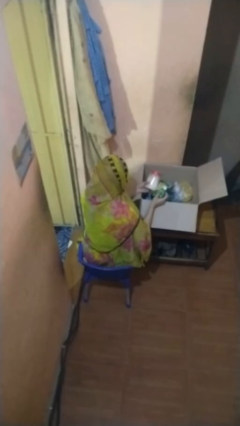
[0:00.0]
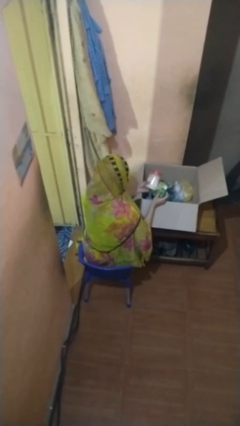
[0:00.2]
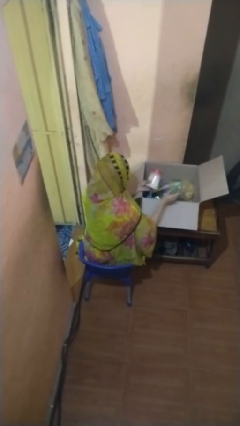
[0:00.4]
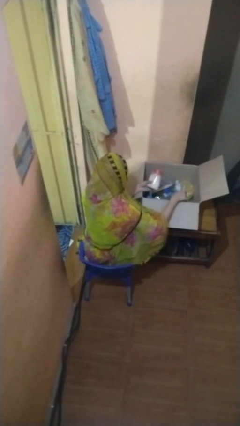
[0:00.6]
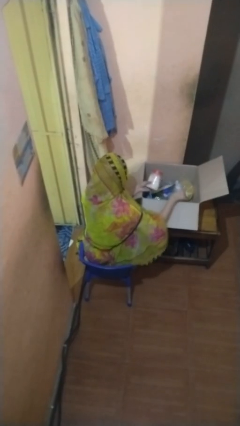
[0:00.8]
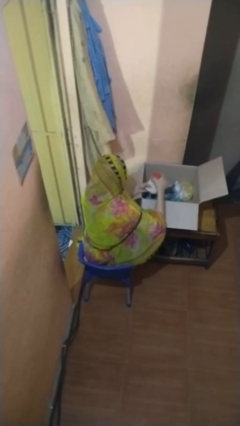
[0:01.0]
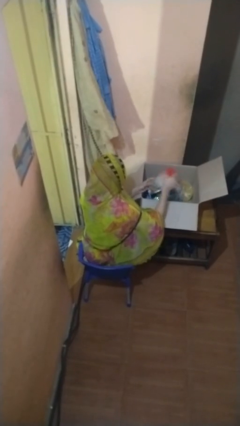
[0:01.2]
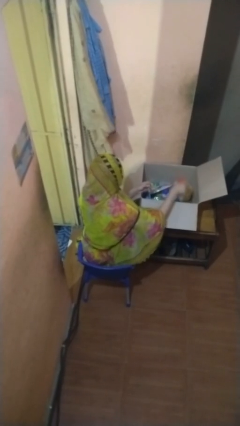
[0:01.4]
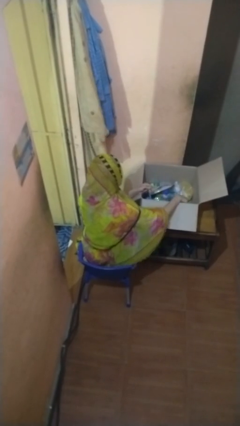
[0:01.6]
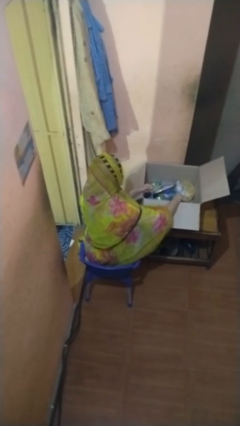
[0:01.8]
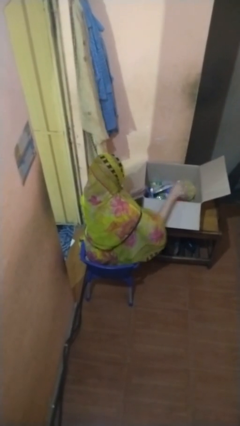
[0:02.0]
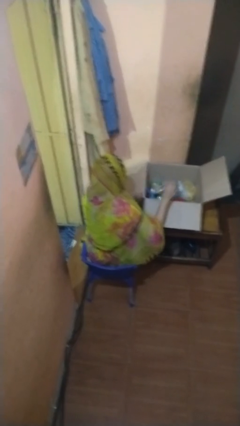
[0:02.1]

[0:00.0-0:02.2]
person puts object into box

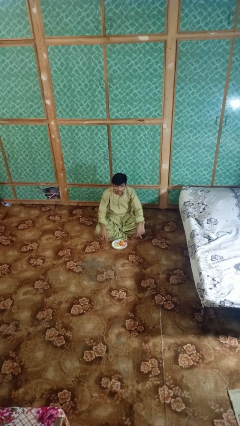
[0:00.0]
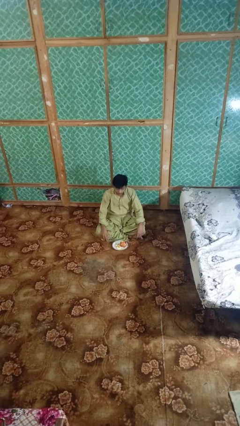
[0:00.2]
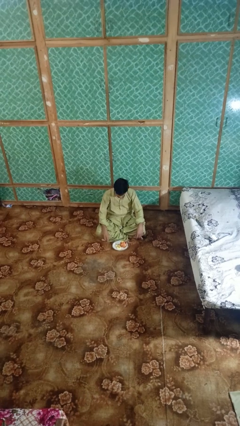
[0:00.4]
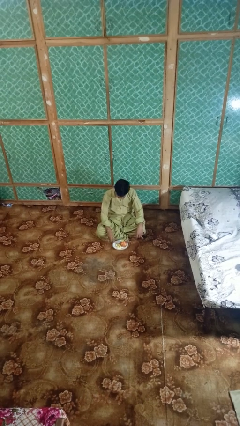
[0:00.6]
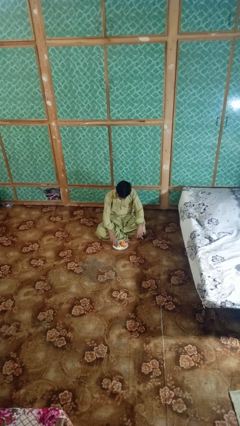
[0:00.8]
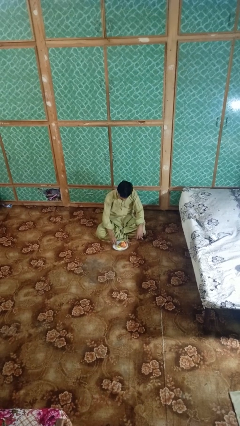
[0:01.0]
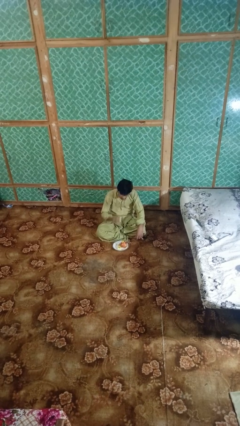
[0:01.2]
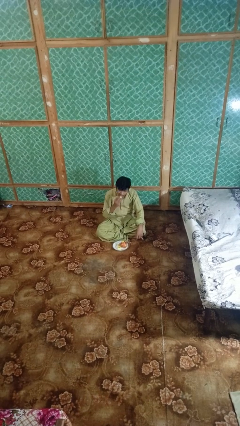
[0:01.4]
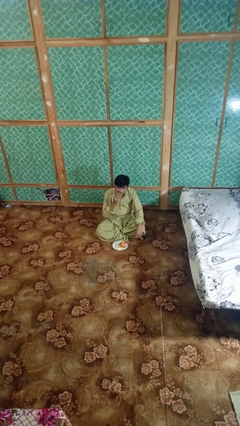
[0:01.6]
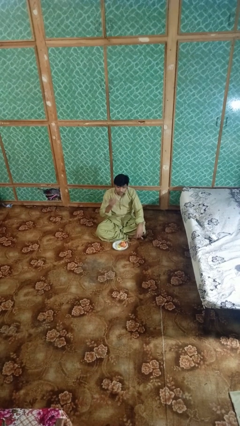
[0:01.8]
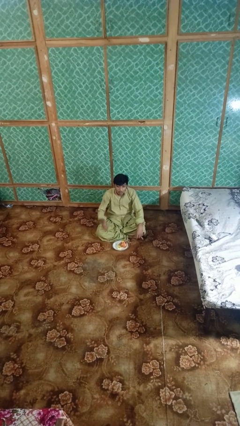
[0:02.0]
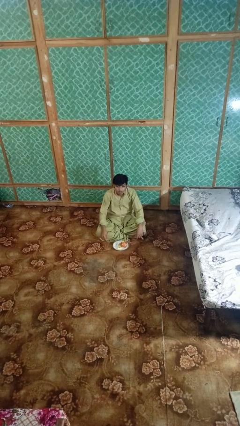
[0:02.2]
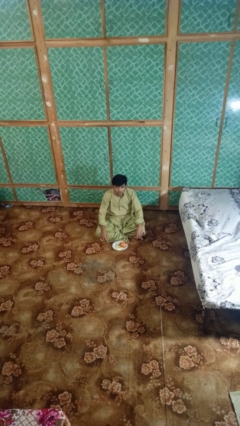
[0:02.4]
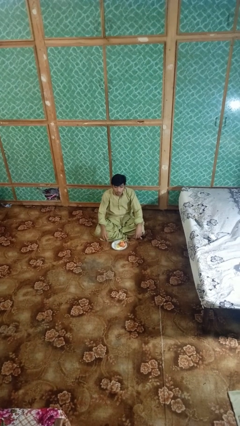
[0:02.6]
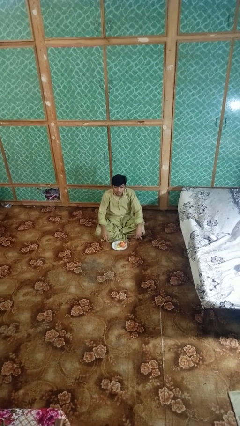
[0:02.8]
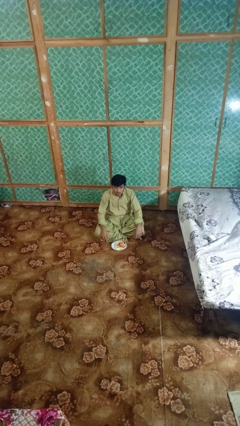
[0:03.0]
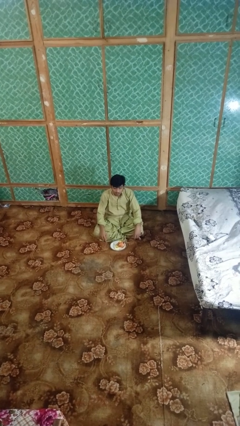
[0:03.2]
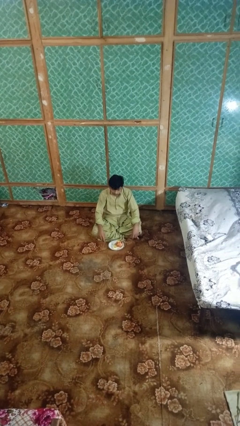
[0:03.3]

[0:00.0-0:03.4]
person eats apple

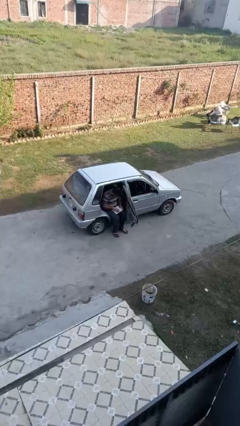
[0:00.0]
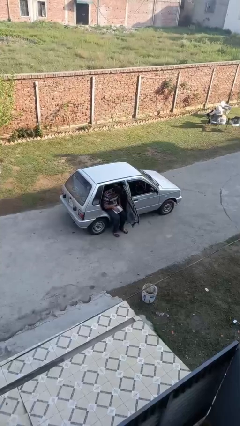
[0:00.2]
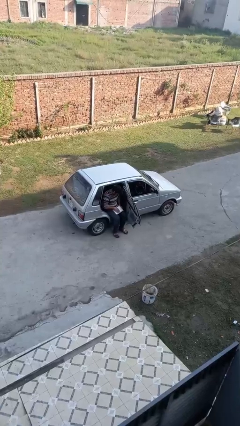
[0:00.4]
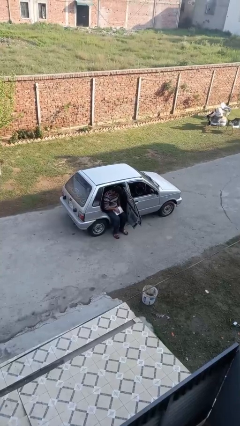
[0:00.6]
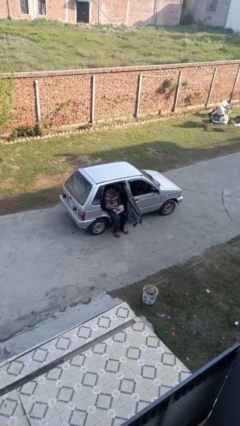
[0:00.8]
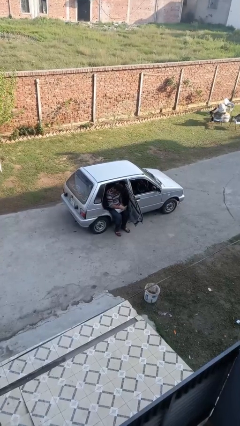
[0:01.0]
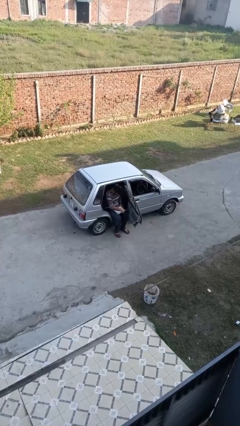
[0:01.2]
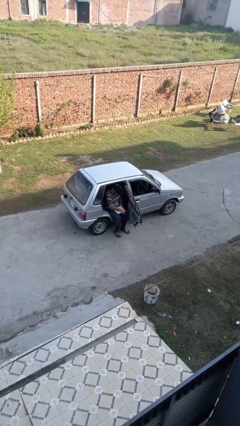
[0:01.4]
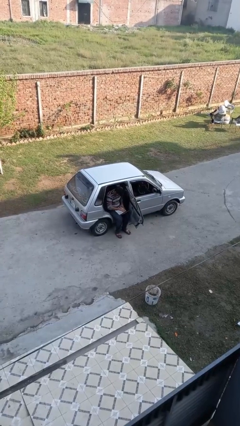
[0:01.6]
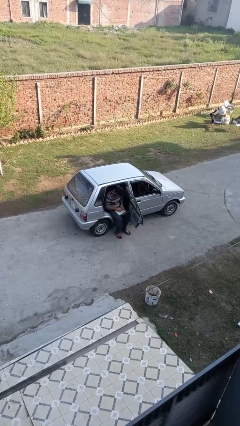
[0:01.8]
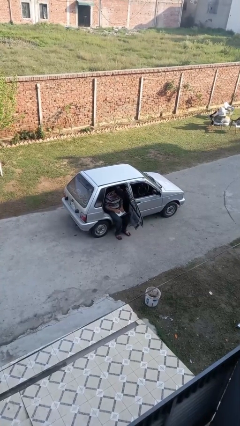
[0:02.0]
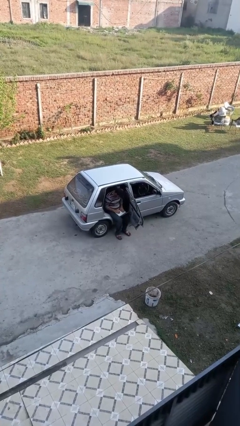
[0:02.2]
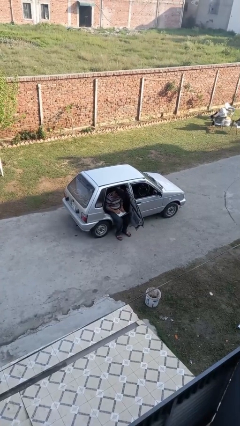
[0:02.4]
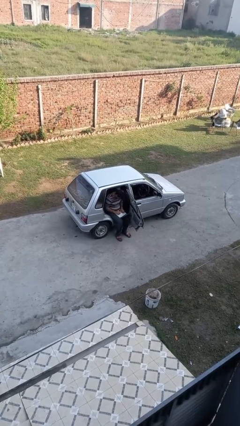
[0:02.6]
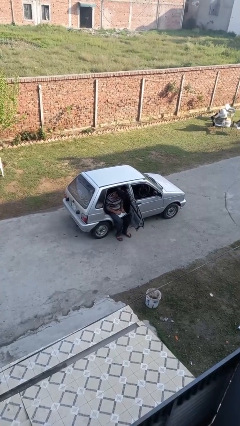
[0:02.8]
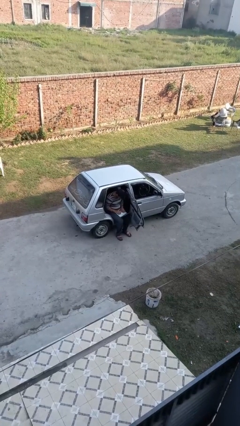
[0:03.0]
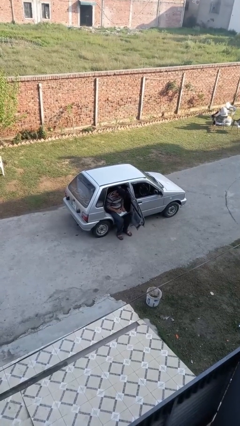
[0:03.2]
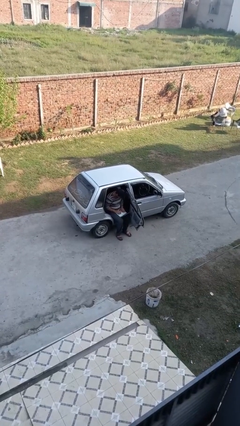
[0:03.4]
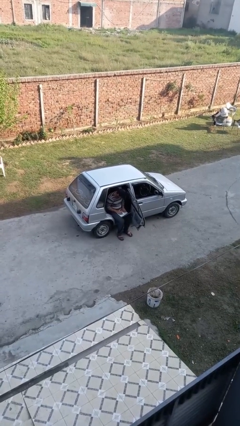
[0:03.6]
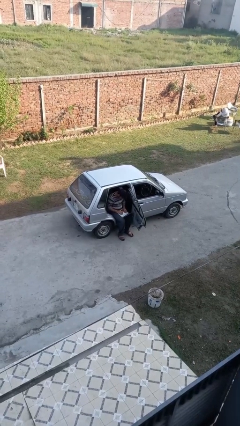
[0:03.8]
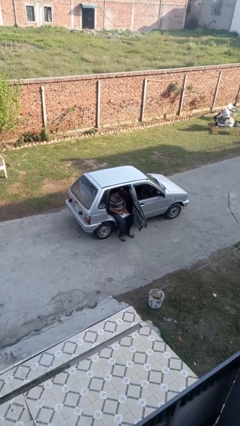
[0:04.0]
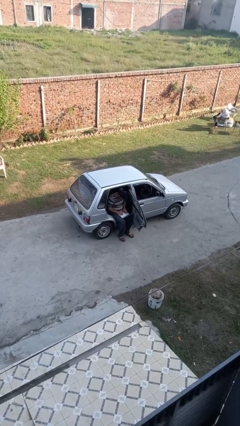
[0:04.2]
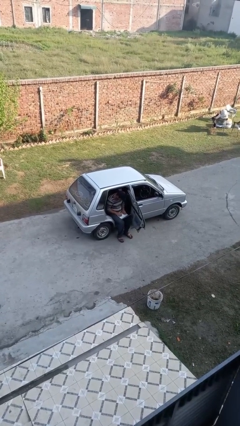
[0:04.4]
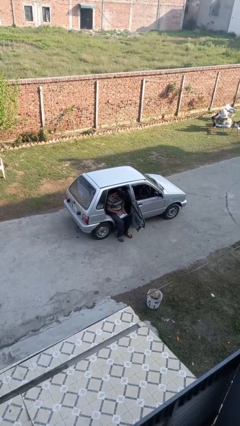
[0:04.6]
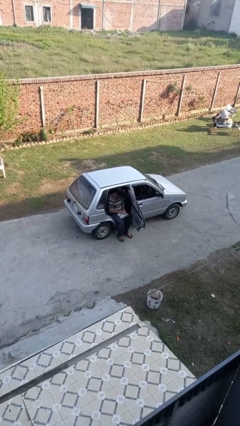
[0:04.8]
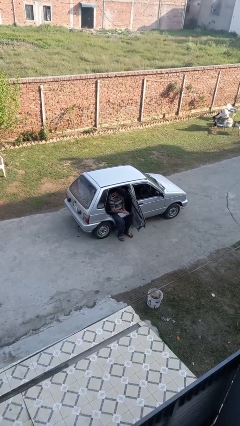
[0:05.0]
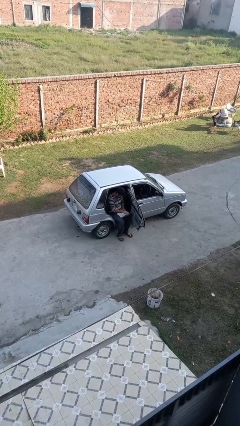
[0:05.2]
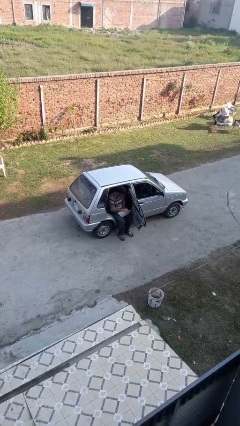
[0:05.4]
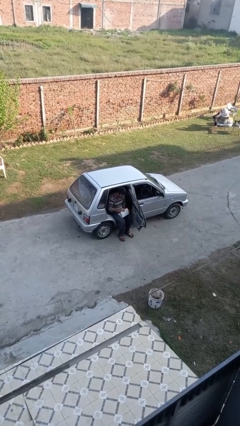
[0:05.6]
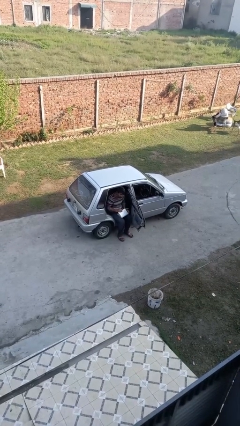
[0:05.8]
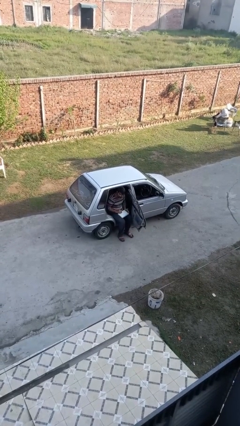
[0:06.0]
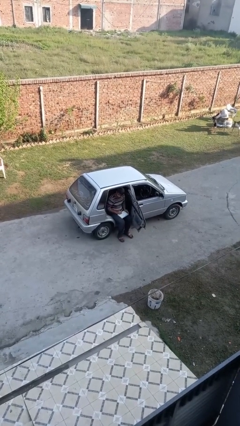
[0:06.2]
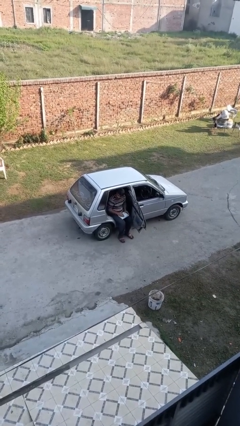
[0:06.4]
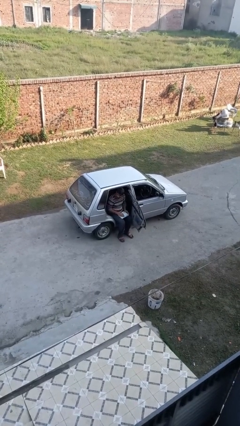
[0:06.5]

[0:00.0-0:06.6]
person interacts with laptop

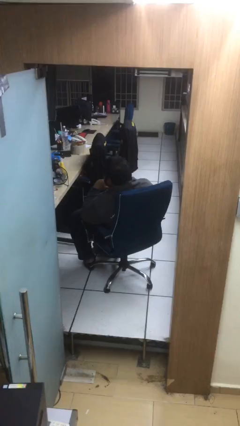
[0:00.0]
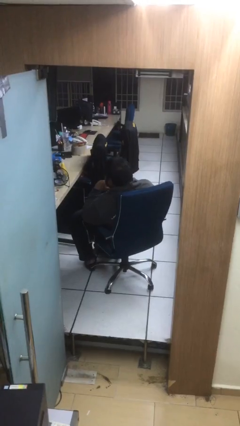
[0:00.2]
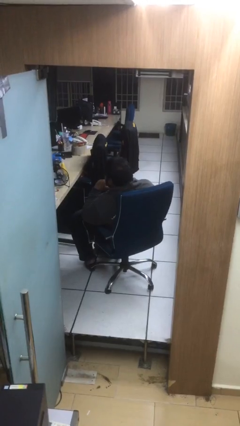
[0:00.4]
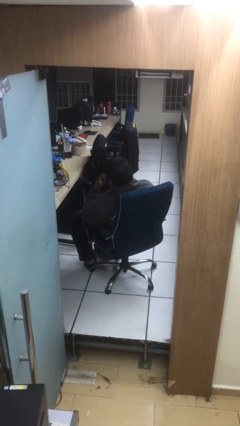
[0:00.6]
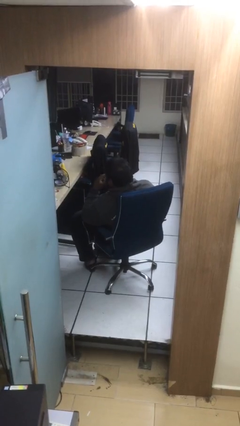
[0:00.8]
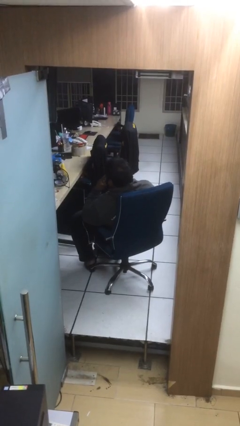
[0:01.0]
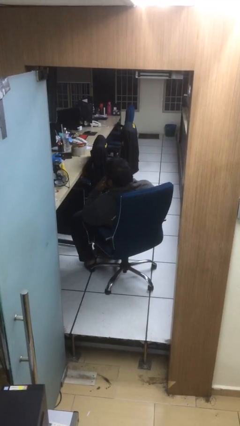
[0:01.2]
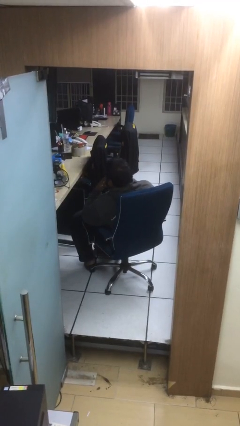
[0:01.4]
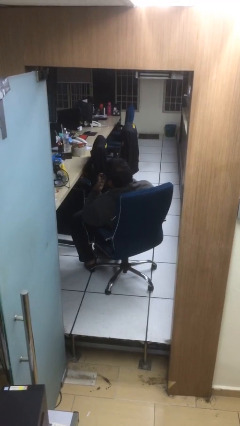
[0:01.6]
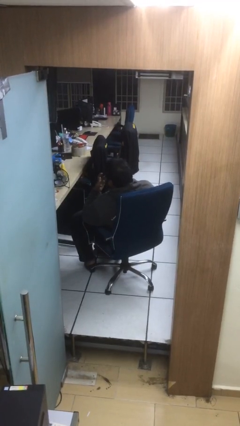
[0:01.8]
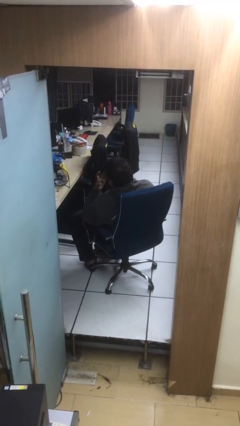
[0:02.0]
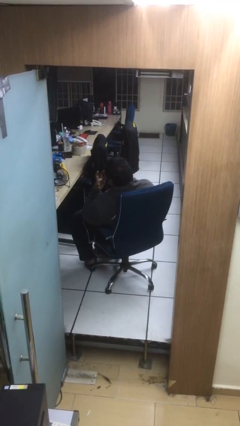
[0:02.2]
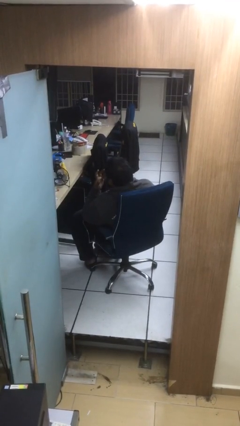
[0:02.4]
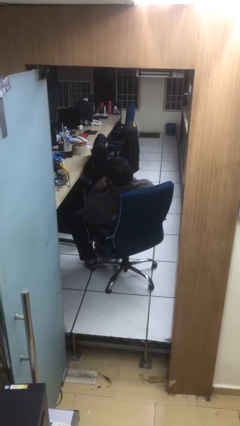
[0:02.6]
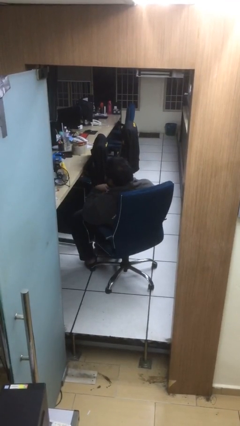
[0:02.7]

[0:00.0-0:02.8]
person licks fingers

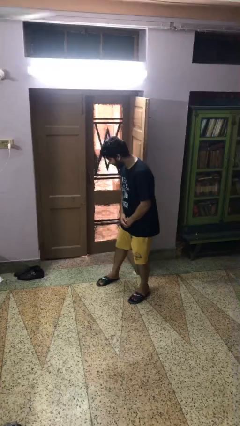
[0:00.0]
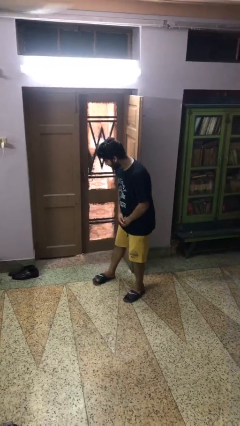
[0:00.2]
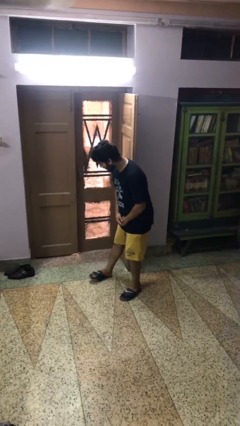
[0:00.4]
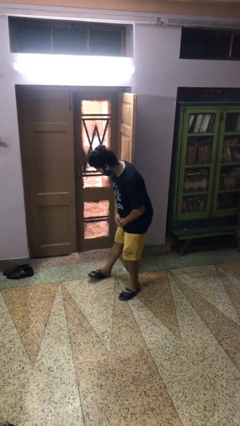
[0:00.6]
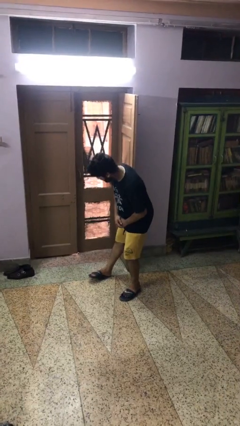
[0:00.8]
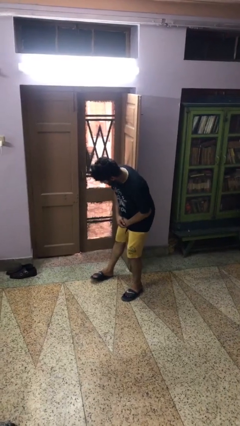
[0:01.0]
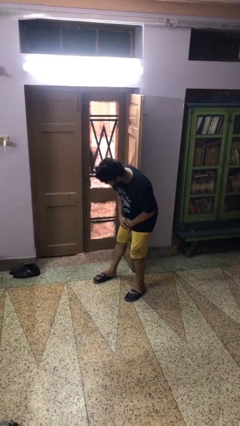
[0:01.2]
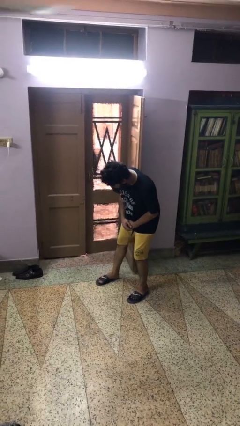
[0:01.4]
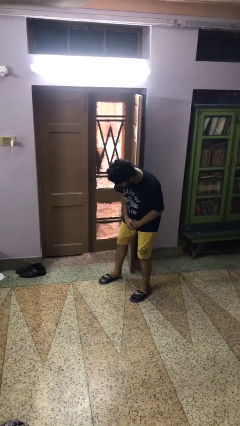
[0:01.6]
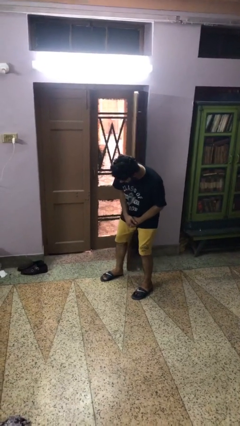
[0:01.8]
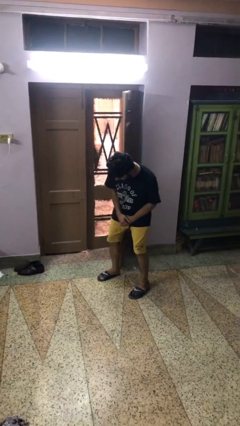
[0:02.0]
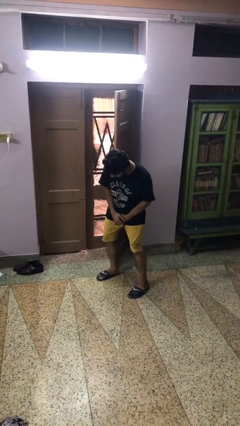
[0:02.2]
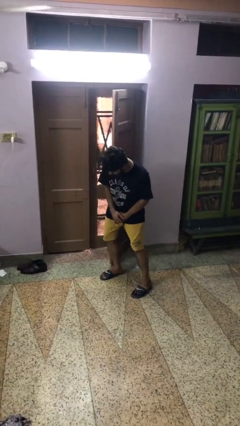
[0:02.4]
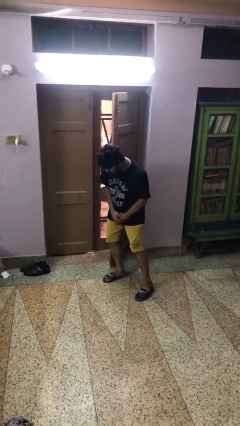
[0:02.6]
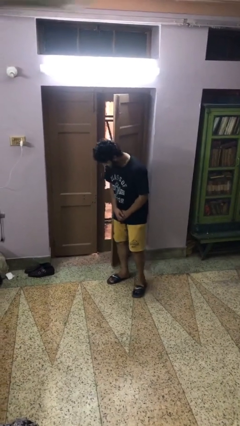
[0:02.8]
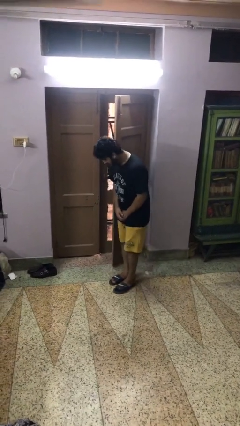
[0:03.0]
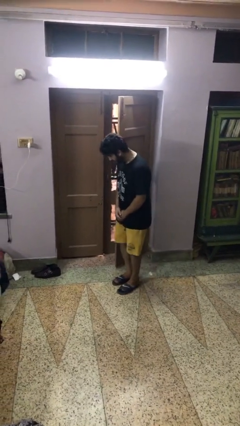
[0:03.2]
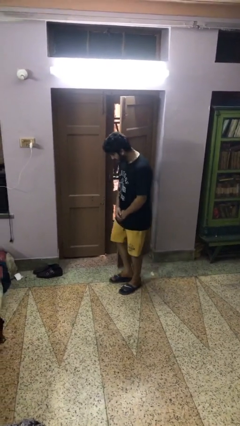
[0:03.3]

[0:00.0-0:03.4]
person closes door with hip
